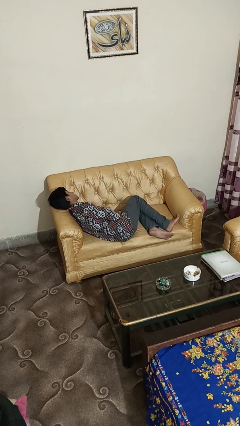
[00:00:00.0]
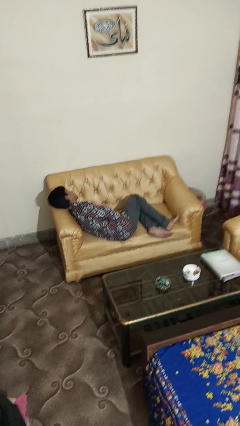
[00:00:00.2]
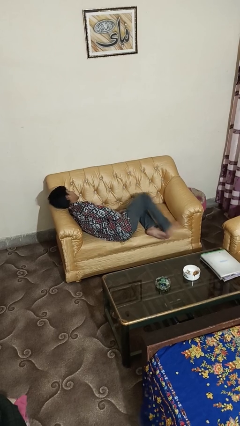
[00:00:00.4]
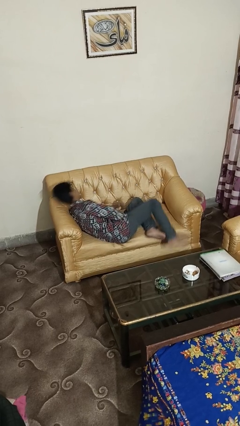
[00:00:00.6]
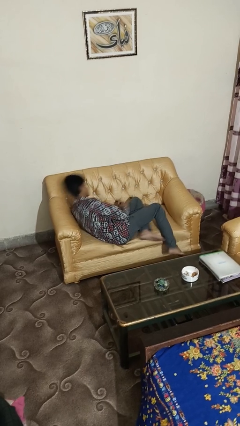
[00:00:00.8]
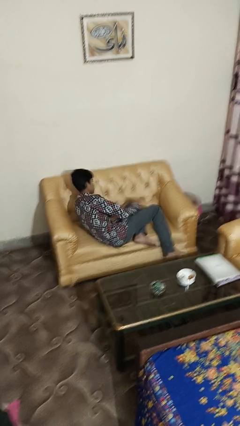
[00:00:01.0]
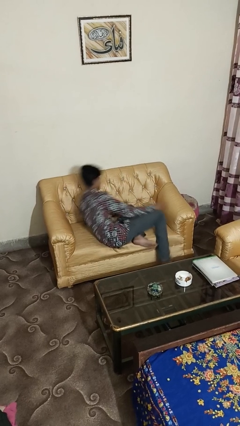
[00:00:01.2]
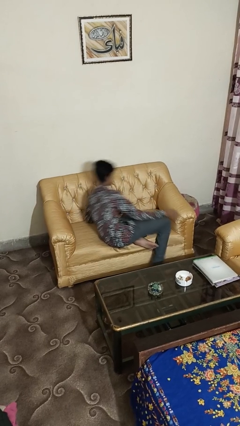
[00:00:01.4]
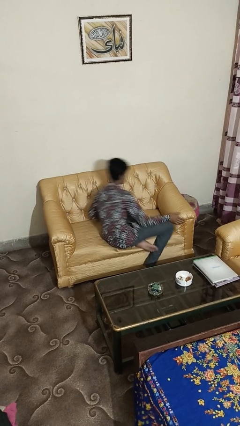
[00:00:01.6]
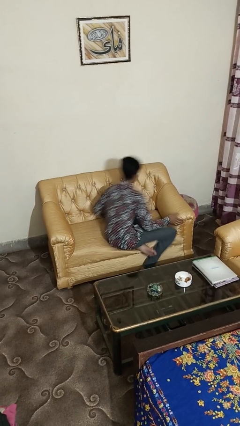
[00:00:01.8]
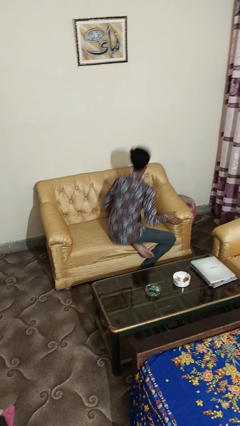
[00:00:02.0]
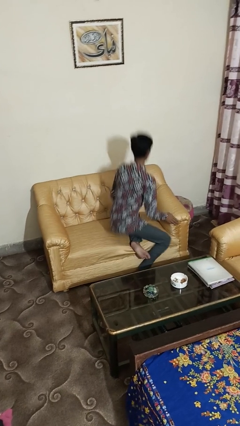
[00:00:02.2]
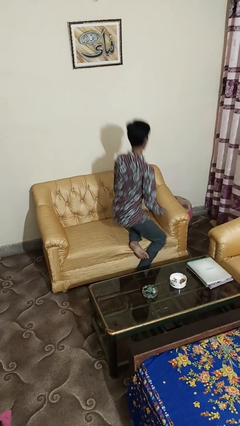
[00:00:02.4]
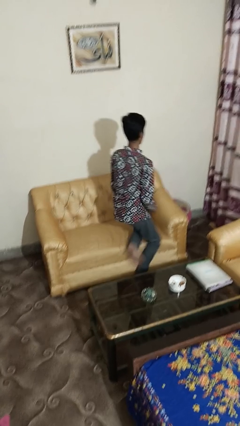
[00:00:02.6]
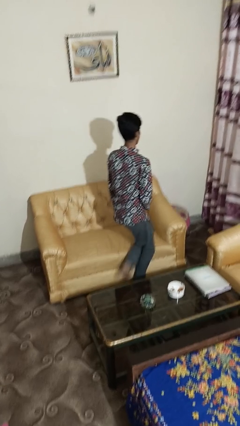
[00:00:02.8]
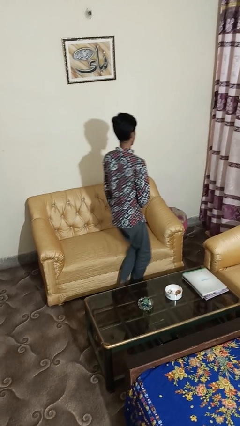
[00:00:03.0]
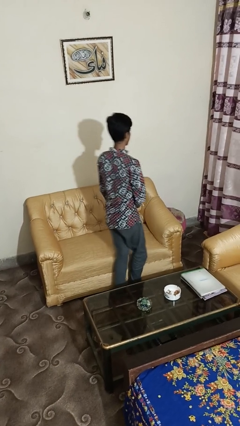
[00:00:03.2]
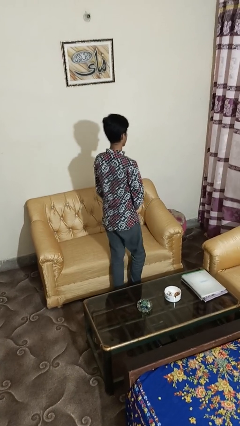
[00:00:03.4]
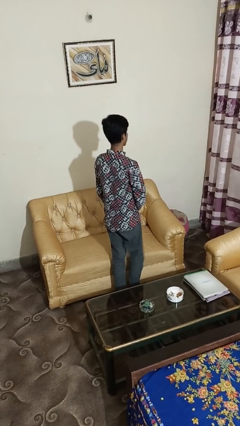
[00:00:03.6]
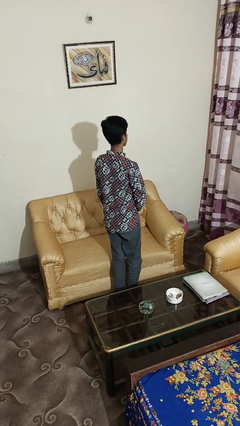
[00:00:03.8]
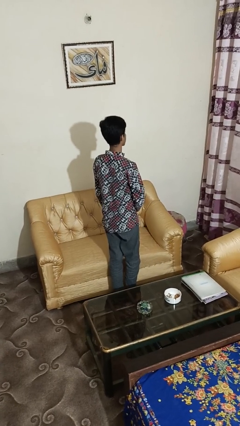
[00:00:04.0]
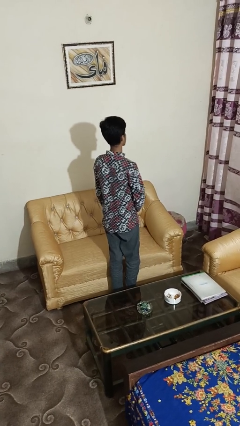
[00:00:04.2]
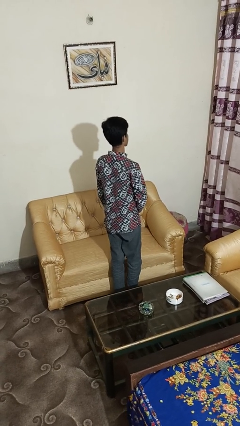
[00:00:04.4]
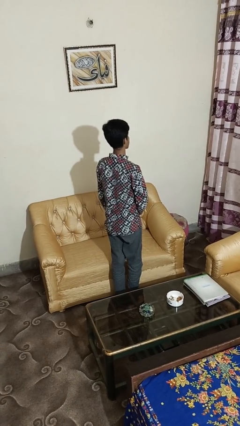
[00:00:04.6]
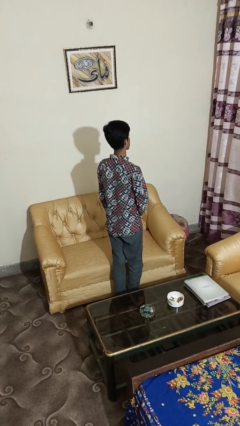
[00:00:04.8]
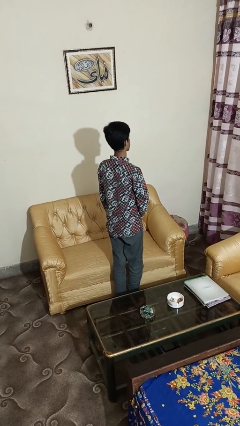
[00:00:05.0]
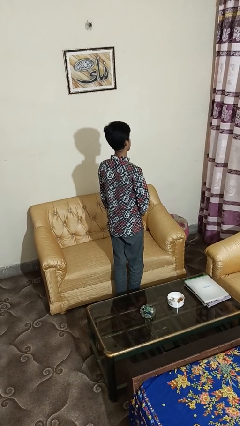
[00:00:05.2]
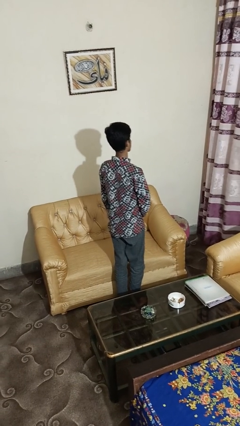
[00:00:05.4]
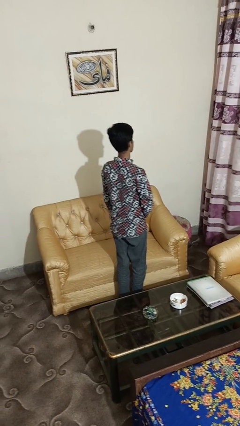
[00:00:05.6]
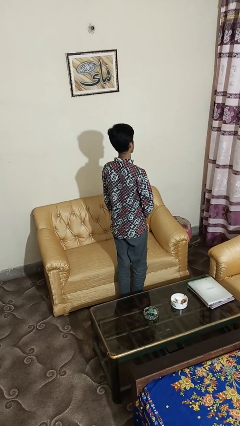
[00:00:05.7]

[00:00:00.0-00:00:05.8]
person stands up

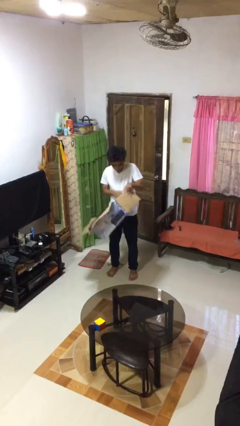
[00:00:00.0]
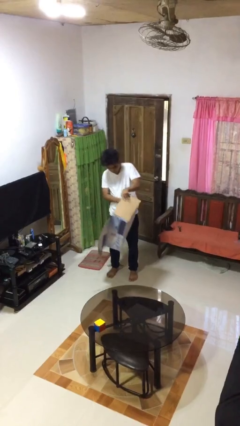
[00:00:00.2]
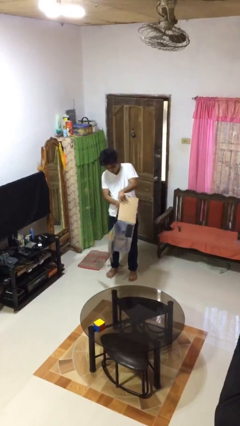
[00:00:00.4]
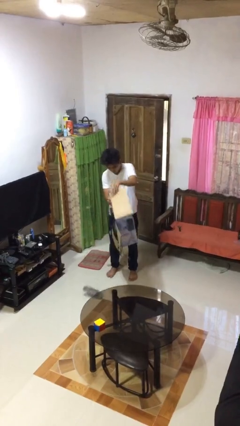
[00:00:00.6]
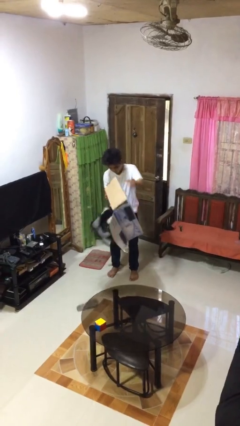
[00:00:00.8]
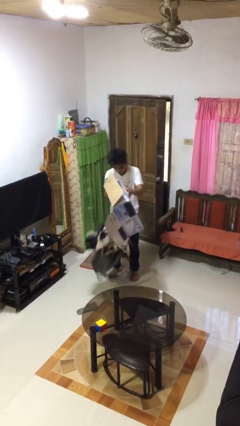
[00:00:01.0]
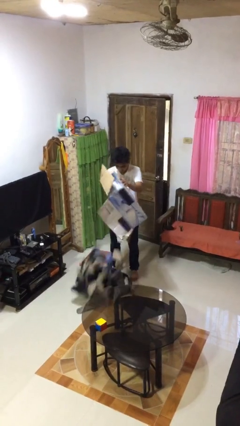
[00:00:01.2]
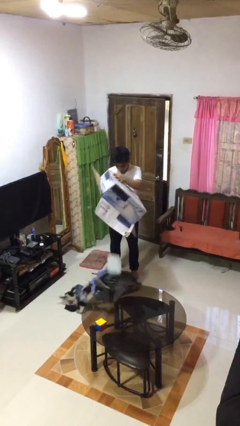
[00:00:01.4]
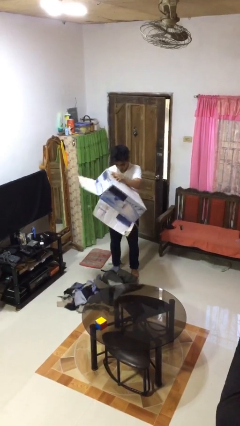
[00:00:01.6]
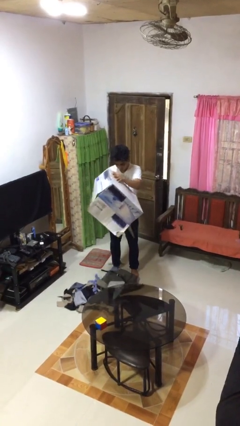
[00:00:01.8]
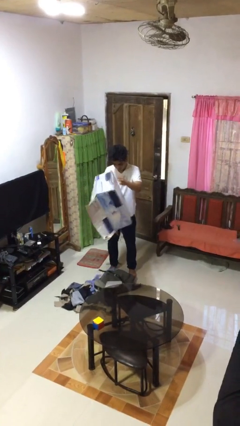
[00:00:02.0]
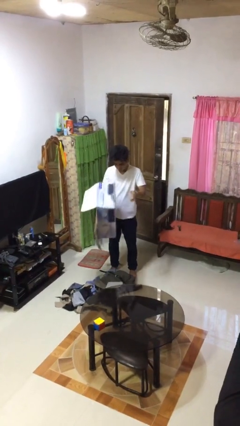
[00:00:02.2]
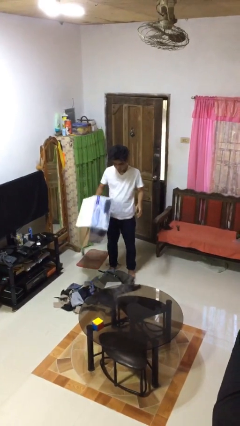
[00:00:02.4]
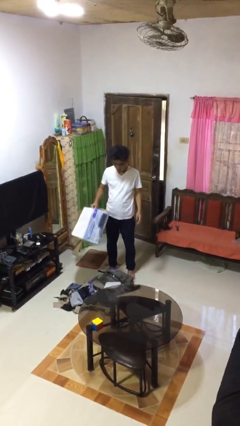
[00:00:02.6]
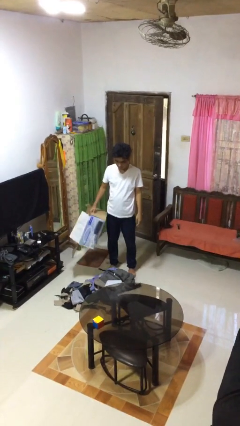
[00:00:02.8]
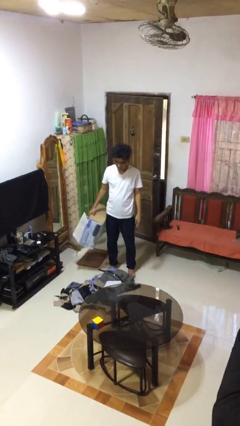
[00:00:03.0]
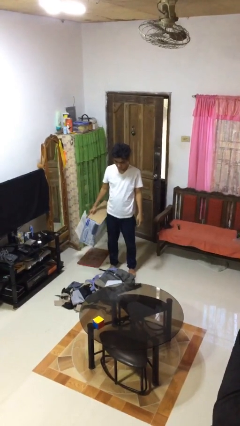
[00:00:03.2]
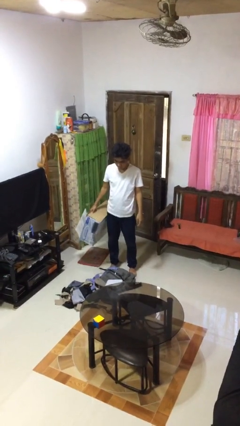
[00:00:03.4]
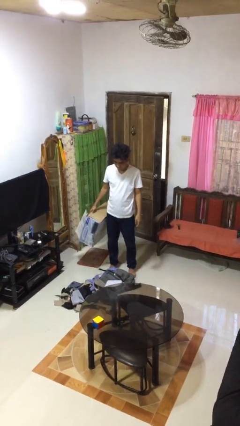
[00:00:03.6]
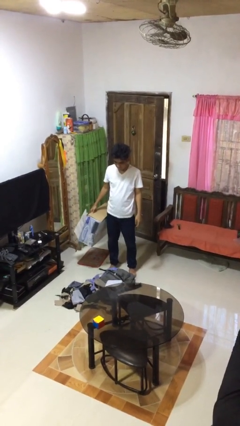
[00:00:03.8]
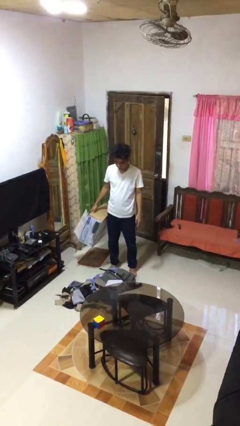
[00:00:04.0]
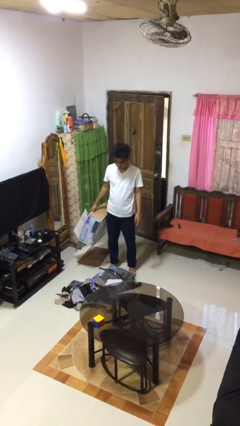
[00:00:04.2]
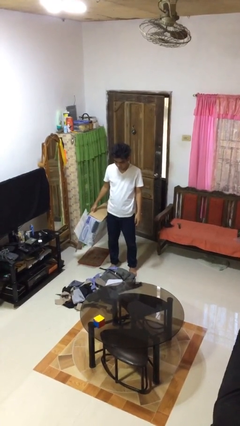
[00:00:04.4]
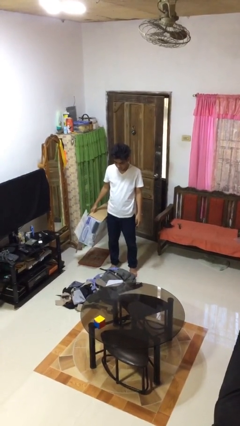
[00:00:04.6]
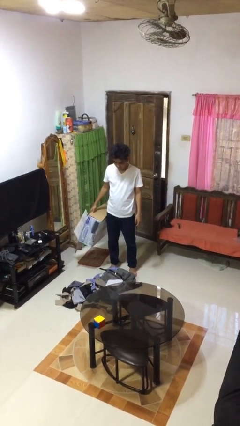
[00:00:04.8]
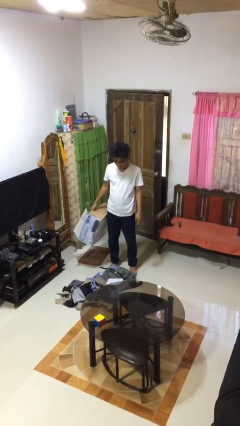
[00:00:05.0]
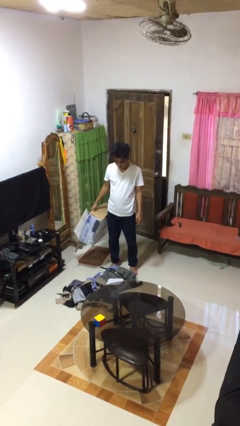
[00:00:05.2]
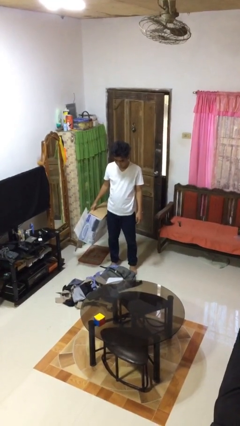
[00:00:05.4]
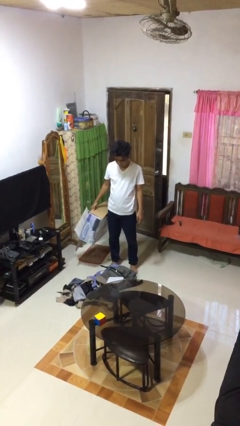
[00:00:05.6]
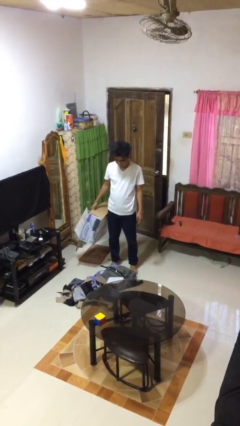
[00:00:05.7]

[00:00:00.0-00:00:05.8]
person unloads box onto floor

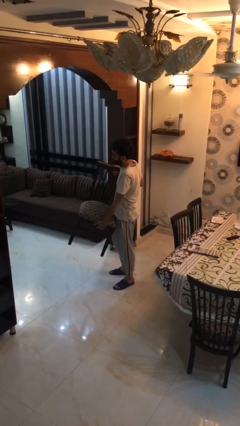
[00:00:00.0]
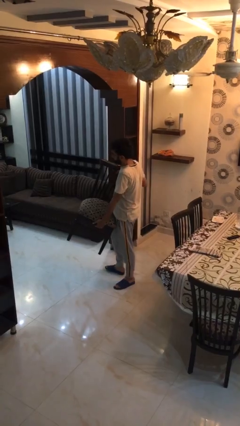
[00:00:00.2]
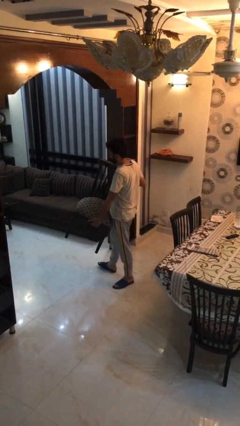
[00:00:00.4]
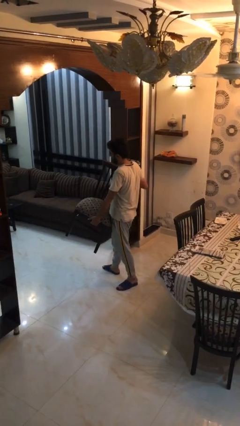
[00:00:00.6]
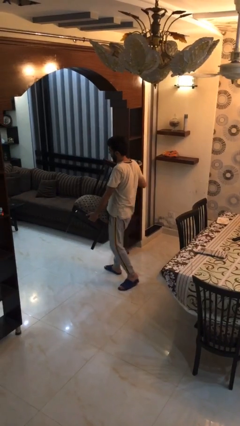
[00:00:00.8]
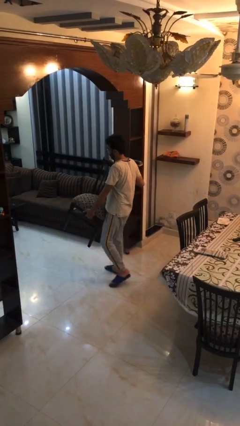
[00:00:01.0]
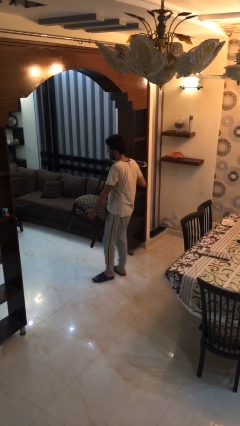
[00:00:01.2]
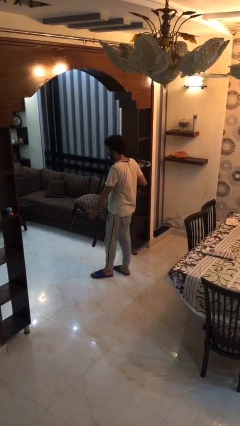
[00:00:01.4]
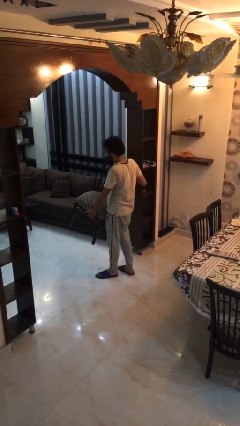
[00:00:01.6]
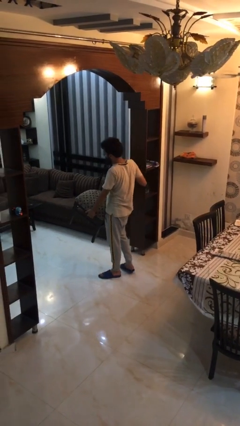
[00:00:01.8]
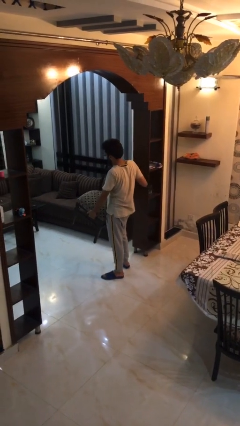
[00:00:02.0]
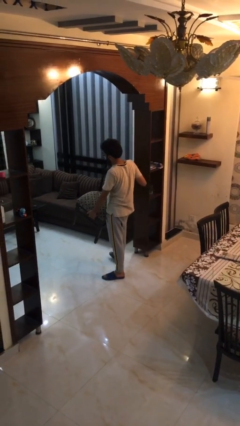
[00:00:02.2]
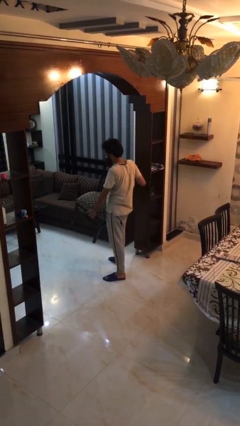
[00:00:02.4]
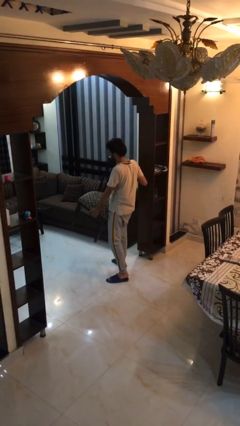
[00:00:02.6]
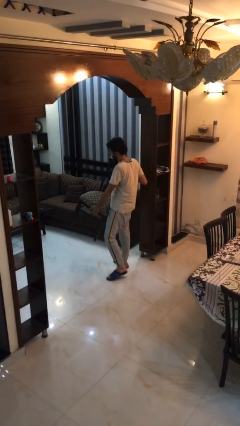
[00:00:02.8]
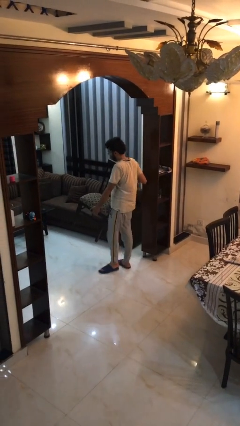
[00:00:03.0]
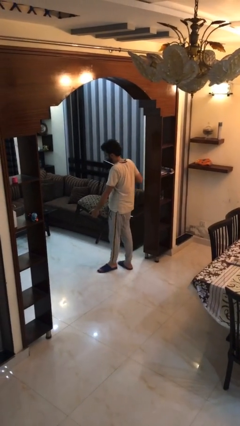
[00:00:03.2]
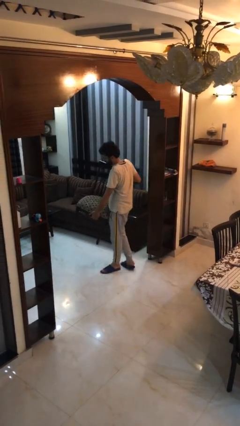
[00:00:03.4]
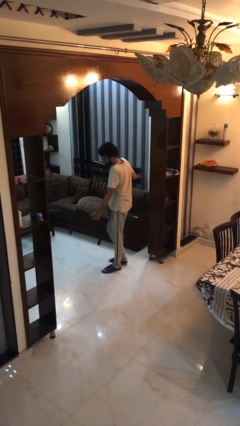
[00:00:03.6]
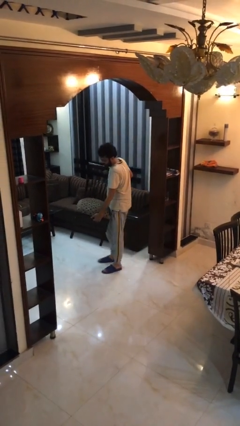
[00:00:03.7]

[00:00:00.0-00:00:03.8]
person carries heavy object

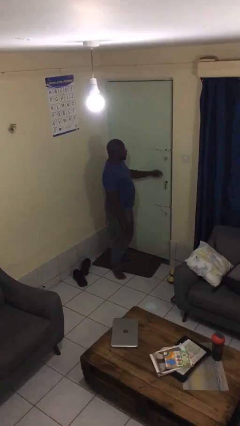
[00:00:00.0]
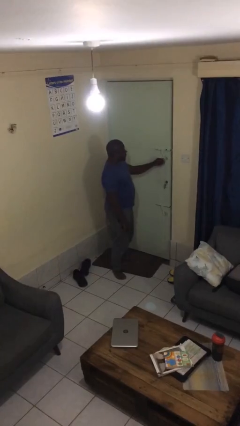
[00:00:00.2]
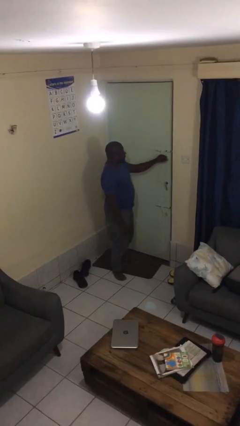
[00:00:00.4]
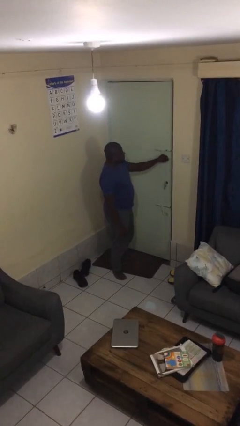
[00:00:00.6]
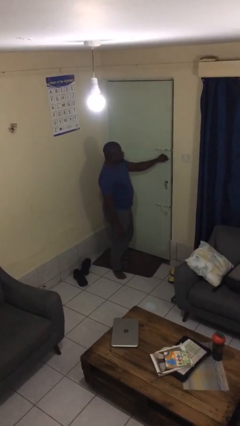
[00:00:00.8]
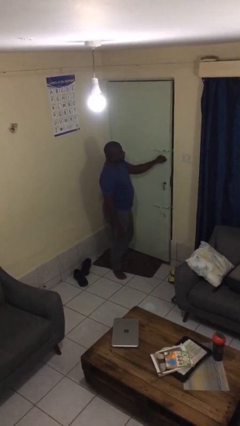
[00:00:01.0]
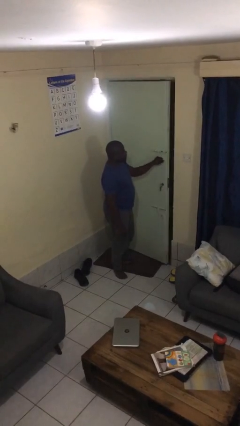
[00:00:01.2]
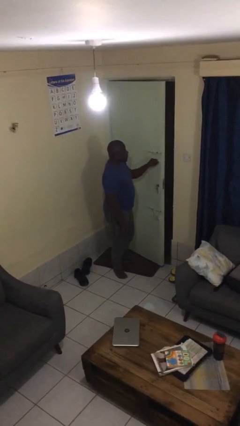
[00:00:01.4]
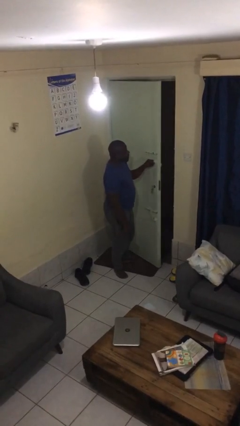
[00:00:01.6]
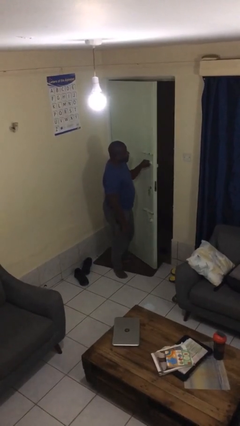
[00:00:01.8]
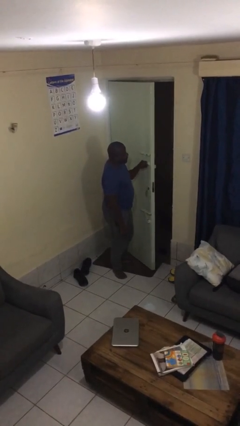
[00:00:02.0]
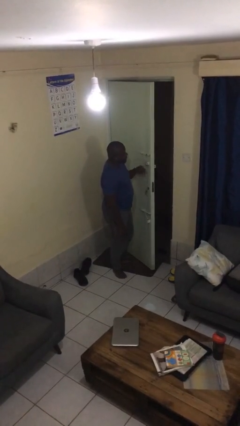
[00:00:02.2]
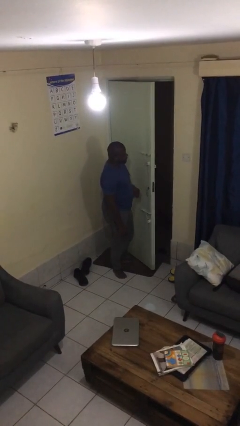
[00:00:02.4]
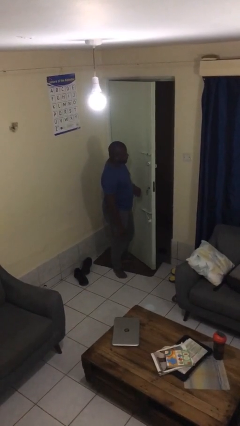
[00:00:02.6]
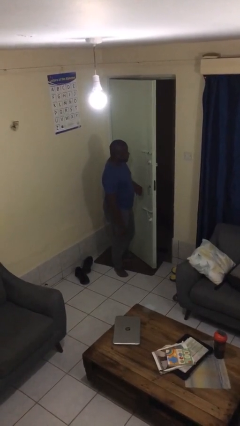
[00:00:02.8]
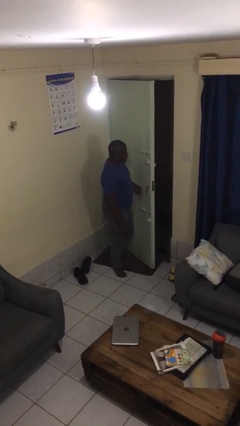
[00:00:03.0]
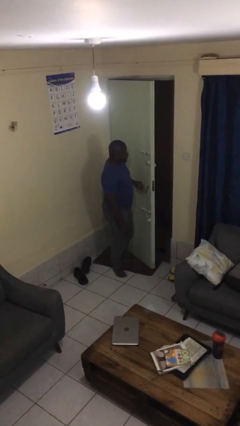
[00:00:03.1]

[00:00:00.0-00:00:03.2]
person opens facility door
